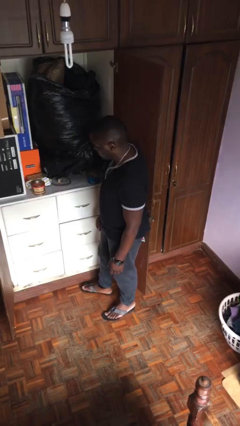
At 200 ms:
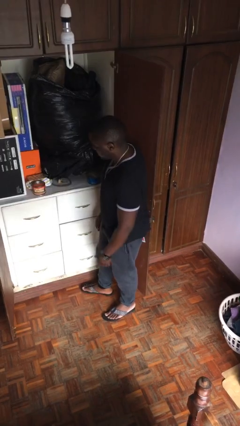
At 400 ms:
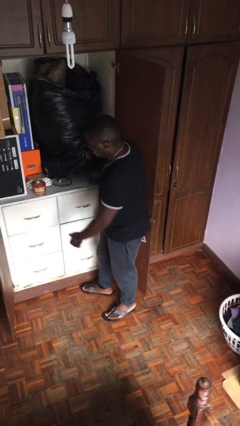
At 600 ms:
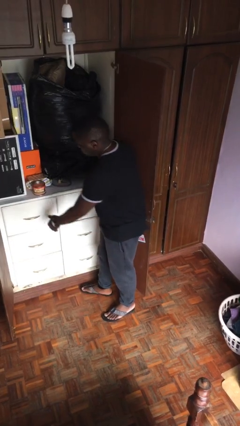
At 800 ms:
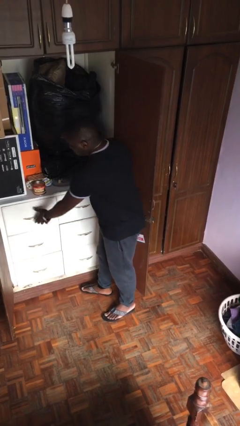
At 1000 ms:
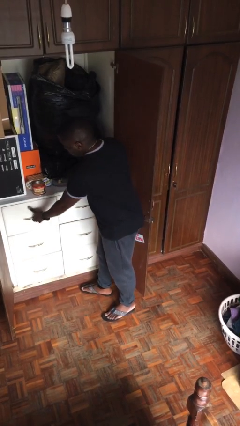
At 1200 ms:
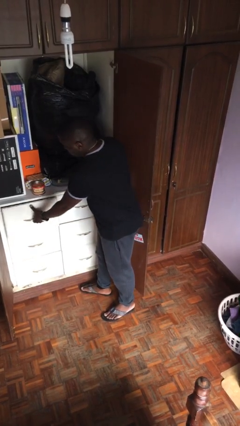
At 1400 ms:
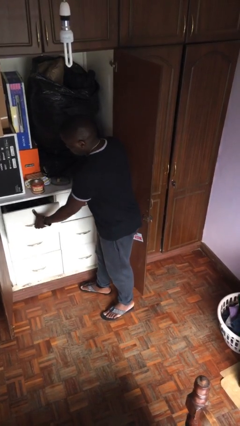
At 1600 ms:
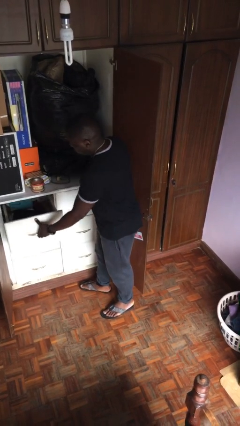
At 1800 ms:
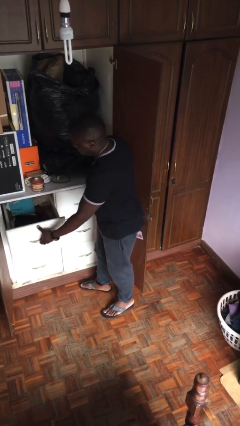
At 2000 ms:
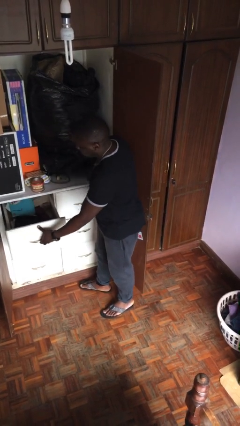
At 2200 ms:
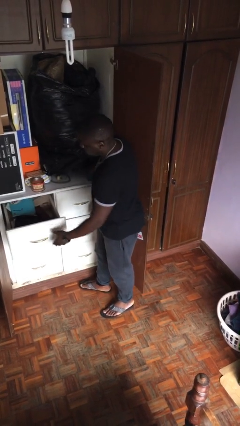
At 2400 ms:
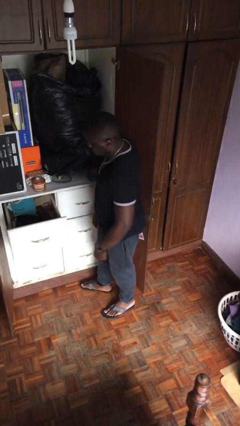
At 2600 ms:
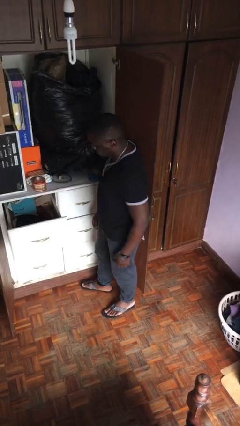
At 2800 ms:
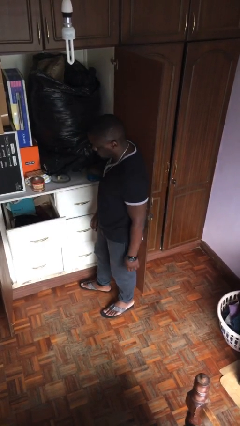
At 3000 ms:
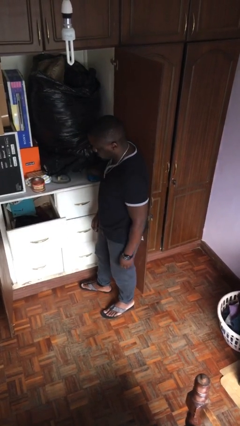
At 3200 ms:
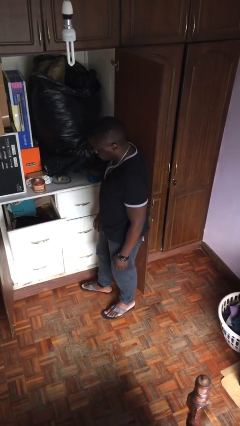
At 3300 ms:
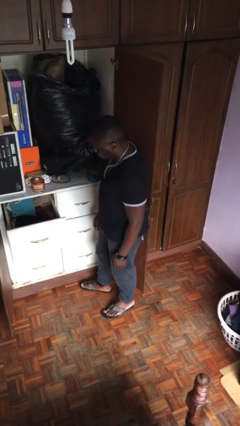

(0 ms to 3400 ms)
person opens dresser drawer

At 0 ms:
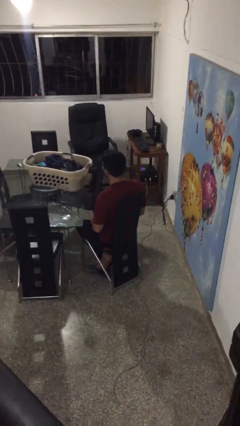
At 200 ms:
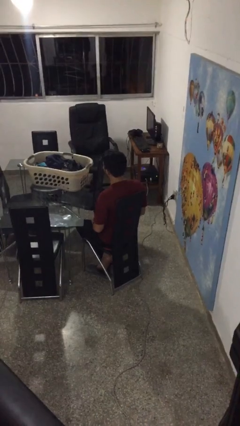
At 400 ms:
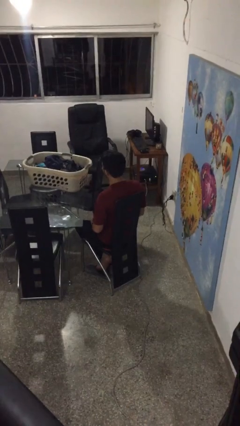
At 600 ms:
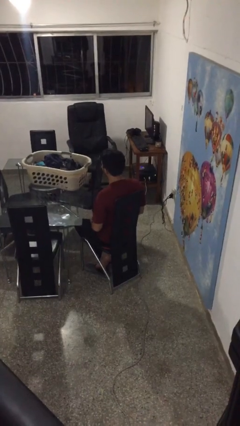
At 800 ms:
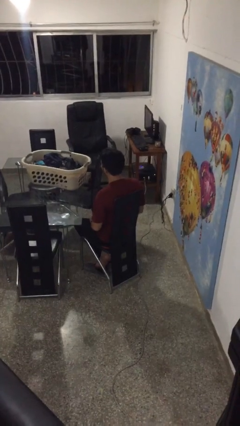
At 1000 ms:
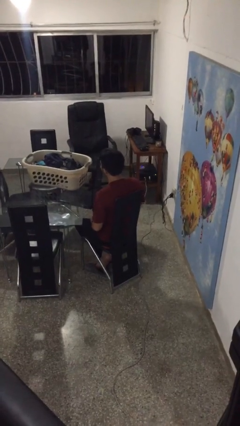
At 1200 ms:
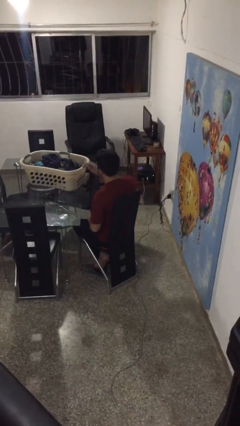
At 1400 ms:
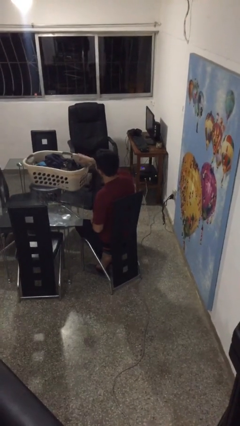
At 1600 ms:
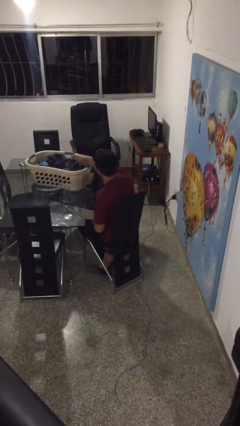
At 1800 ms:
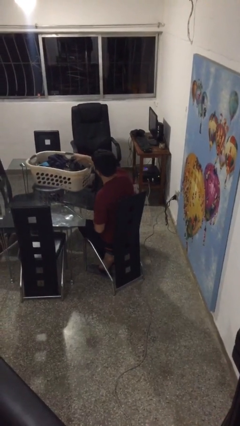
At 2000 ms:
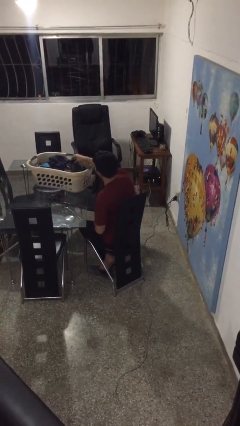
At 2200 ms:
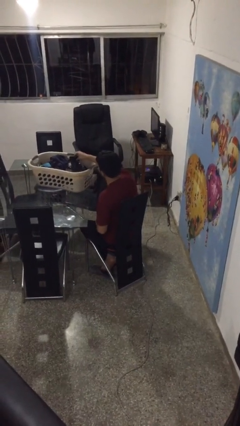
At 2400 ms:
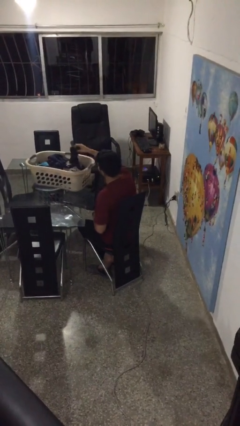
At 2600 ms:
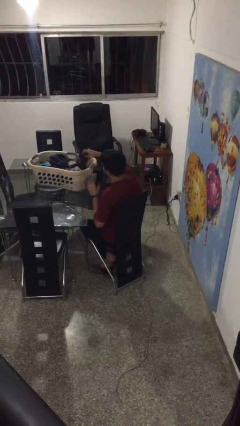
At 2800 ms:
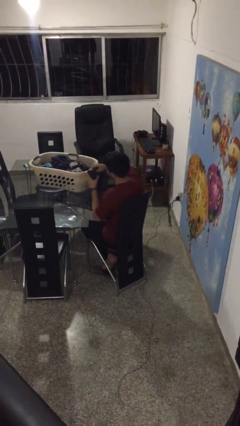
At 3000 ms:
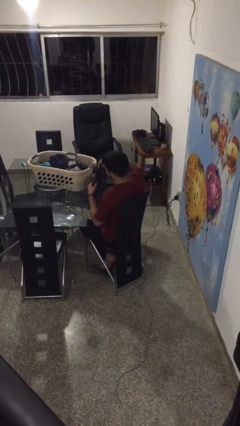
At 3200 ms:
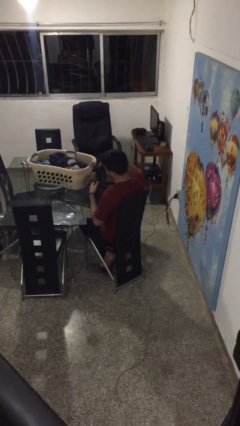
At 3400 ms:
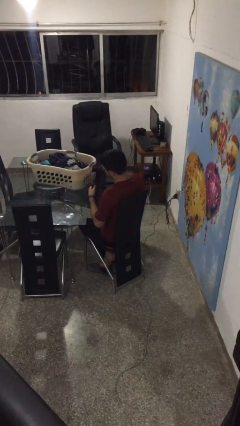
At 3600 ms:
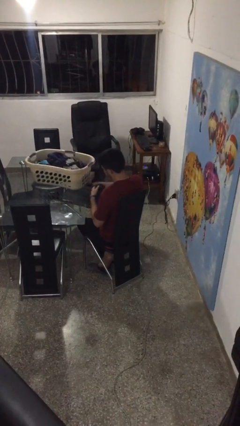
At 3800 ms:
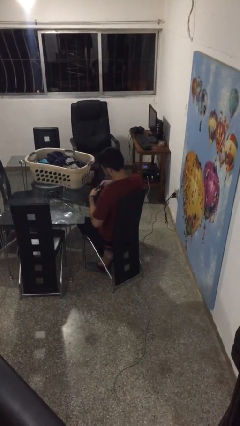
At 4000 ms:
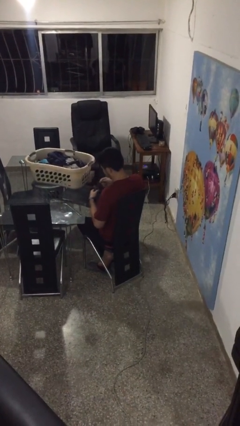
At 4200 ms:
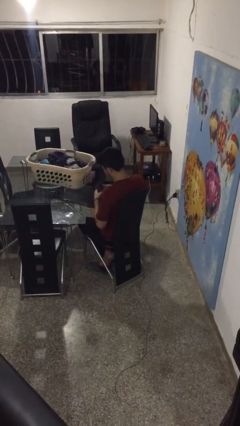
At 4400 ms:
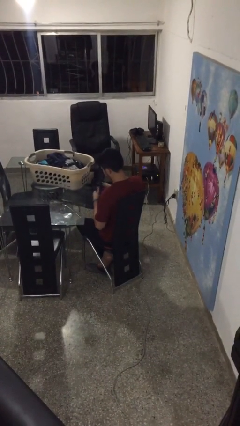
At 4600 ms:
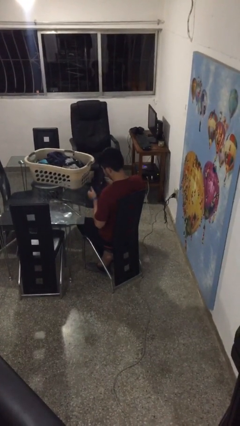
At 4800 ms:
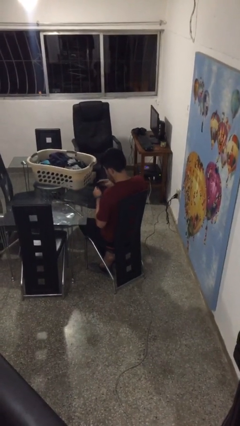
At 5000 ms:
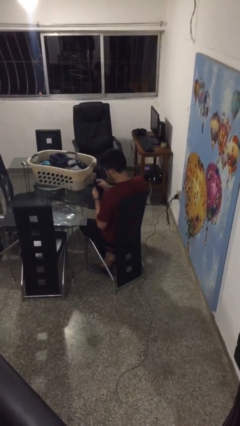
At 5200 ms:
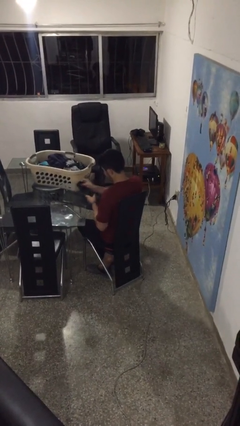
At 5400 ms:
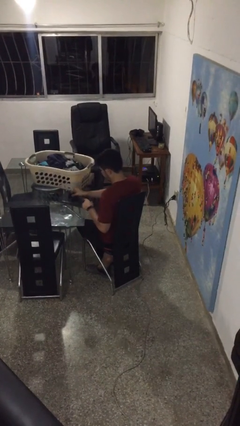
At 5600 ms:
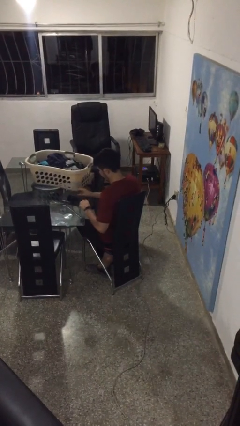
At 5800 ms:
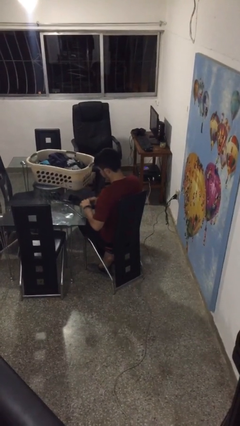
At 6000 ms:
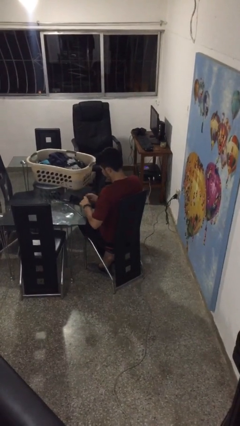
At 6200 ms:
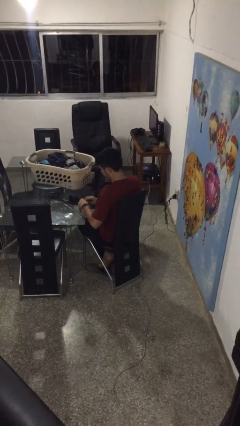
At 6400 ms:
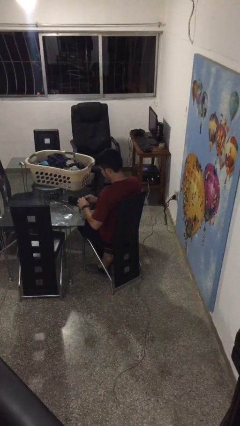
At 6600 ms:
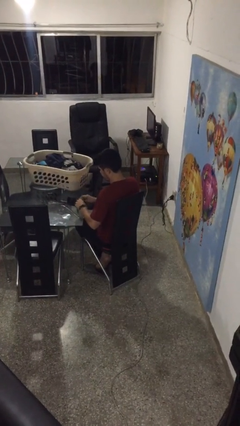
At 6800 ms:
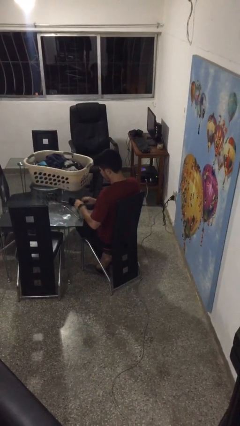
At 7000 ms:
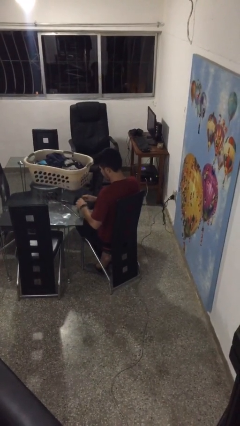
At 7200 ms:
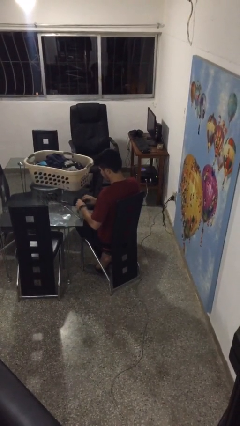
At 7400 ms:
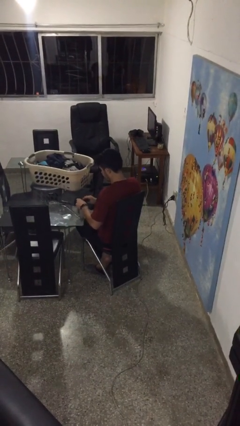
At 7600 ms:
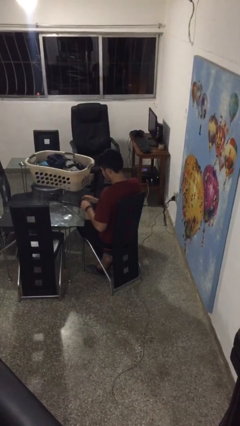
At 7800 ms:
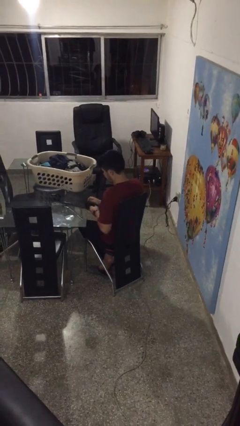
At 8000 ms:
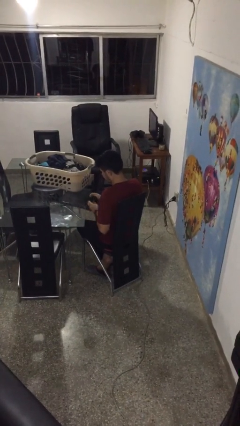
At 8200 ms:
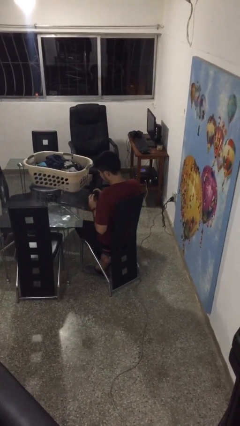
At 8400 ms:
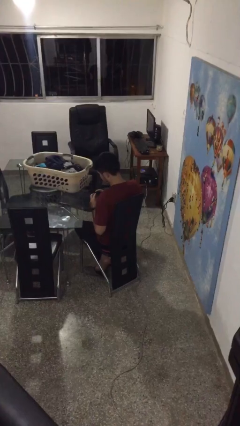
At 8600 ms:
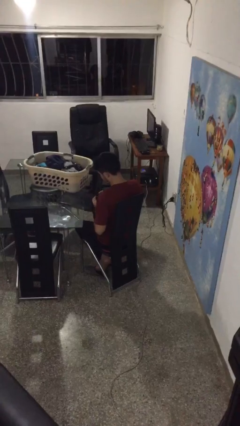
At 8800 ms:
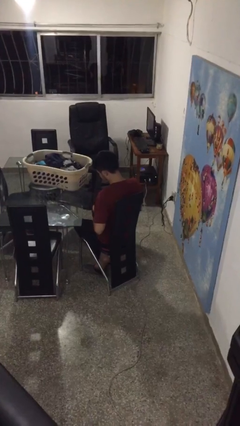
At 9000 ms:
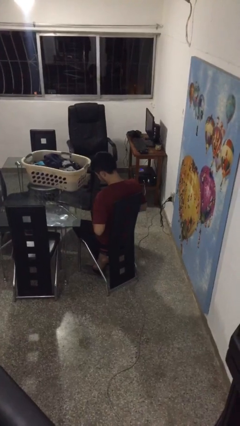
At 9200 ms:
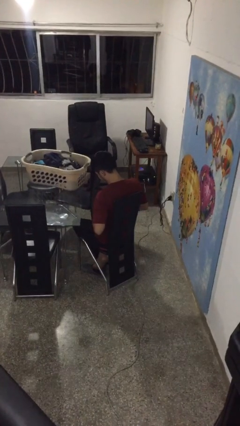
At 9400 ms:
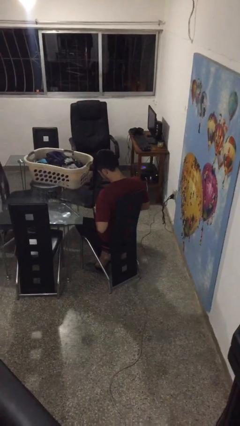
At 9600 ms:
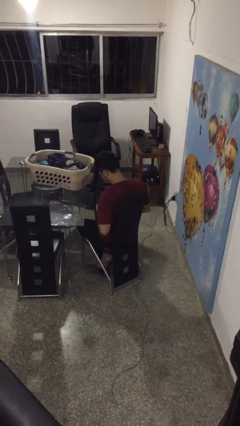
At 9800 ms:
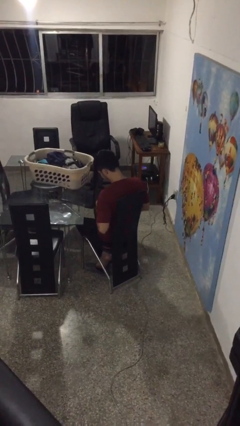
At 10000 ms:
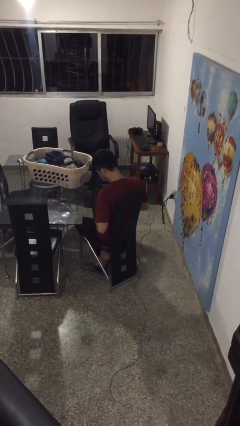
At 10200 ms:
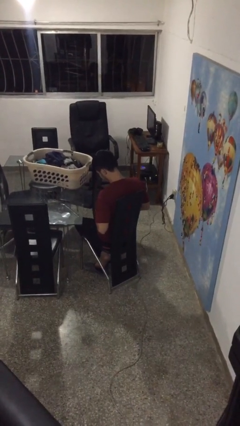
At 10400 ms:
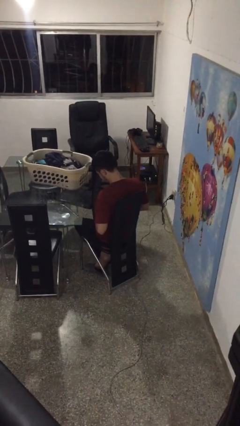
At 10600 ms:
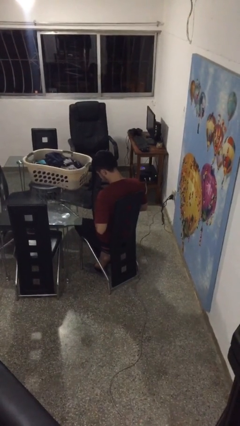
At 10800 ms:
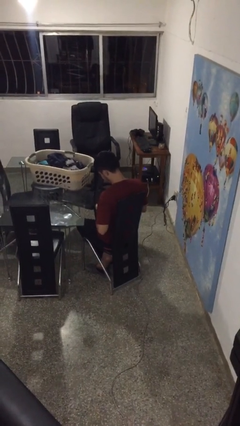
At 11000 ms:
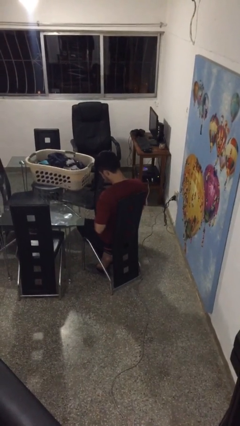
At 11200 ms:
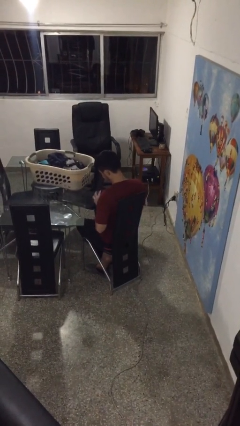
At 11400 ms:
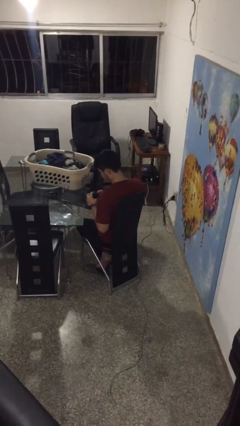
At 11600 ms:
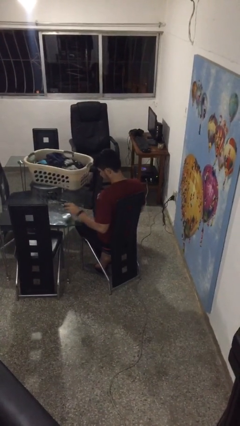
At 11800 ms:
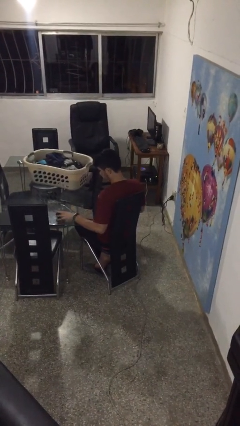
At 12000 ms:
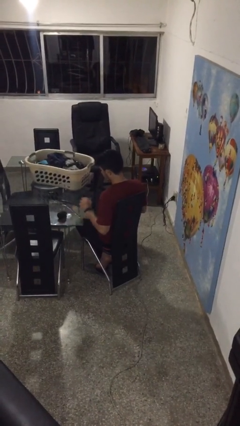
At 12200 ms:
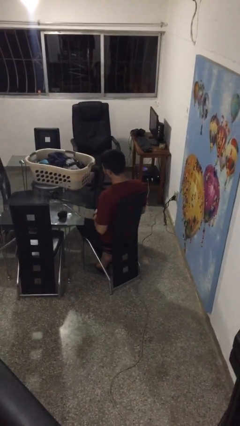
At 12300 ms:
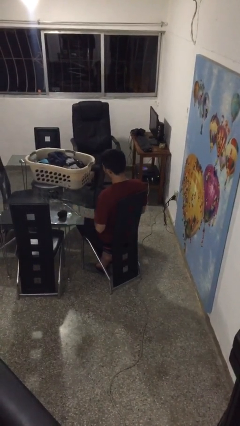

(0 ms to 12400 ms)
person folds socks

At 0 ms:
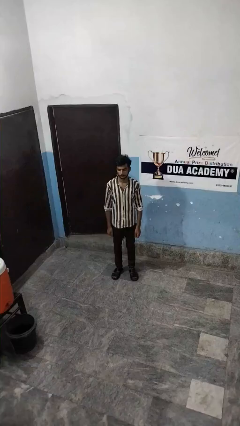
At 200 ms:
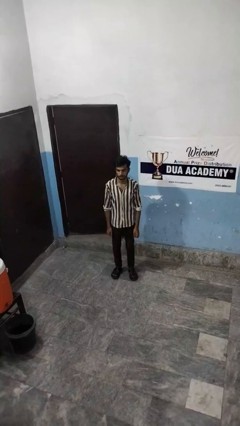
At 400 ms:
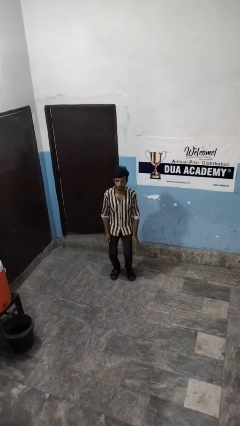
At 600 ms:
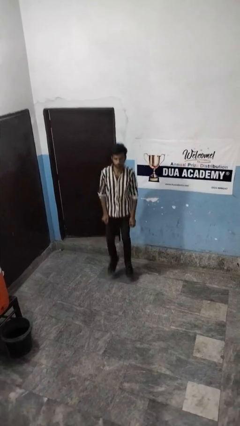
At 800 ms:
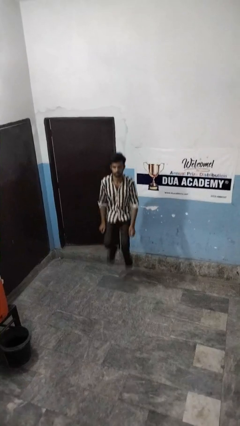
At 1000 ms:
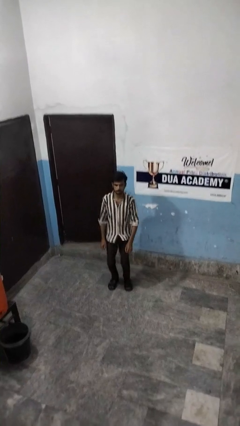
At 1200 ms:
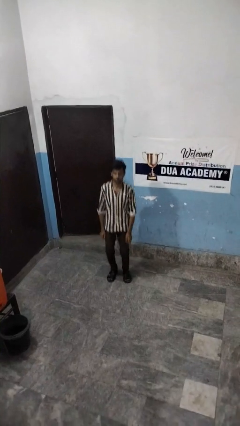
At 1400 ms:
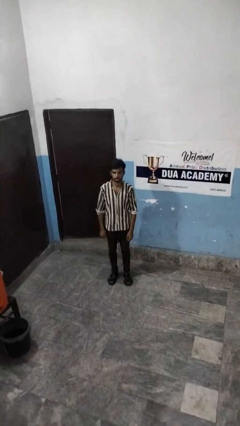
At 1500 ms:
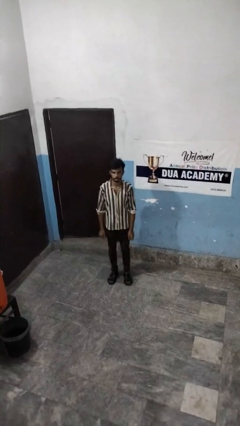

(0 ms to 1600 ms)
person jumps

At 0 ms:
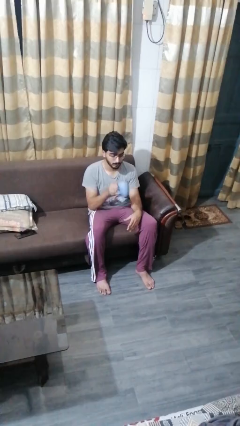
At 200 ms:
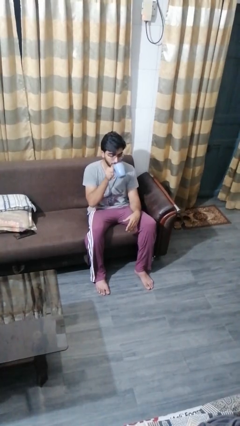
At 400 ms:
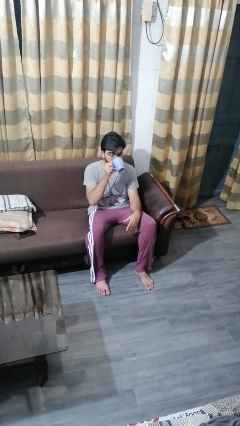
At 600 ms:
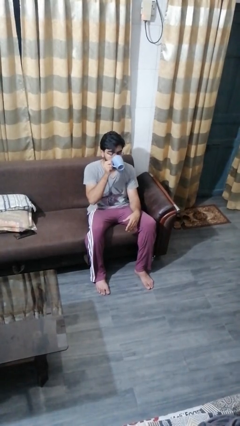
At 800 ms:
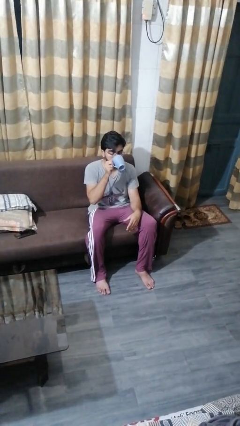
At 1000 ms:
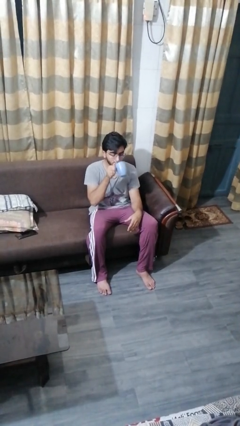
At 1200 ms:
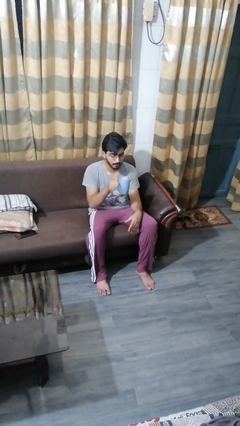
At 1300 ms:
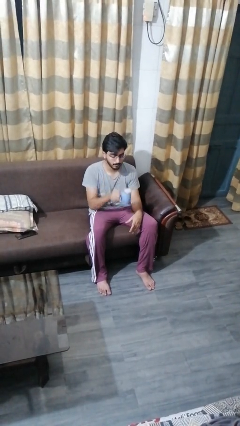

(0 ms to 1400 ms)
person drinks from mug
